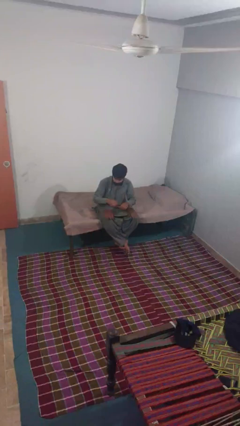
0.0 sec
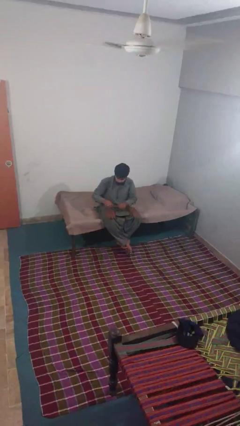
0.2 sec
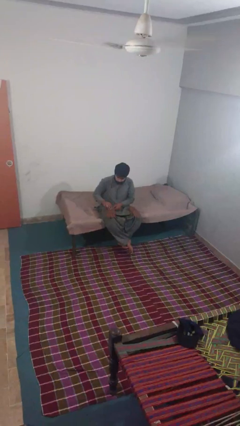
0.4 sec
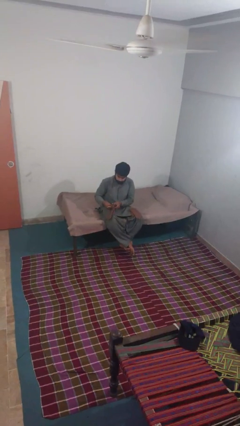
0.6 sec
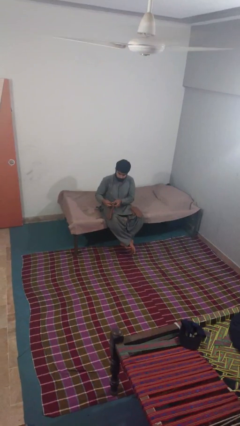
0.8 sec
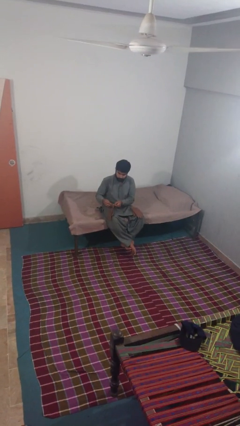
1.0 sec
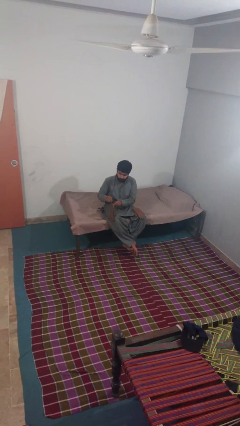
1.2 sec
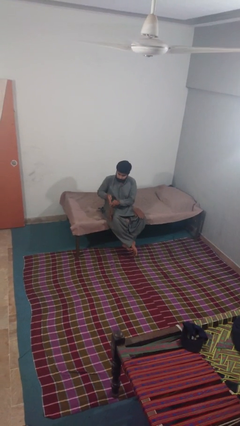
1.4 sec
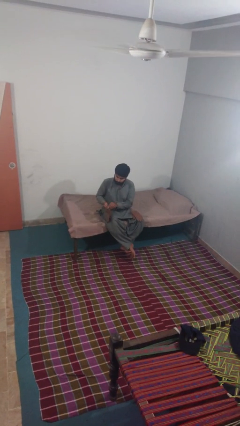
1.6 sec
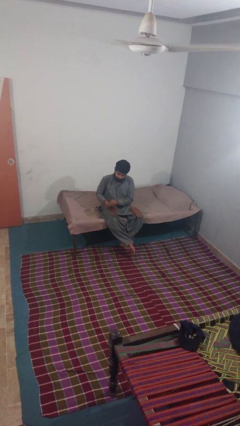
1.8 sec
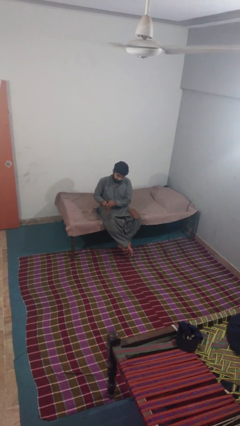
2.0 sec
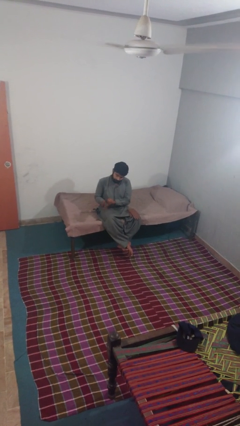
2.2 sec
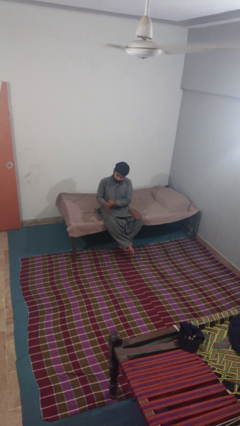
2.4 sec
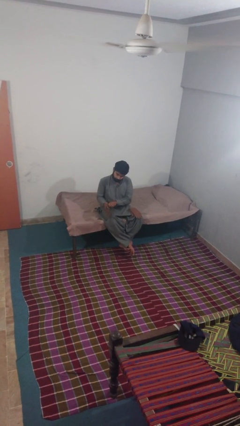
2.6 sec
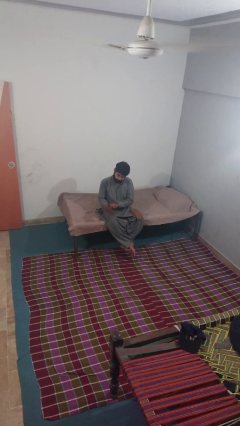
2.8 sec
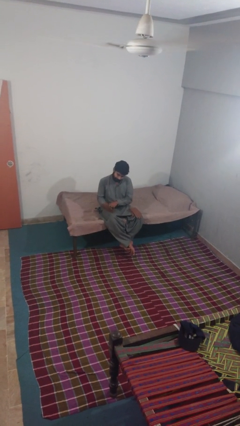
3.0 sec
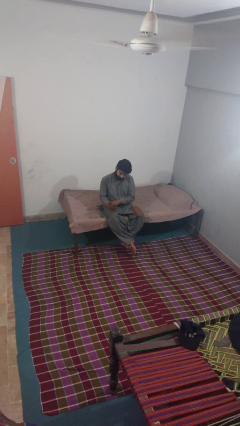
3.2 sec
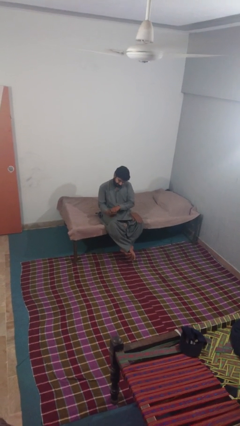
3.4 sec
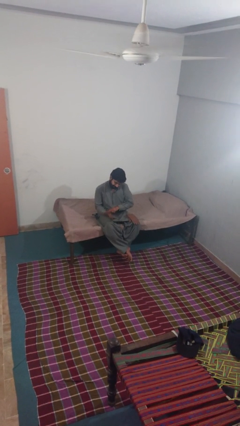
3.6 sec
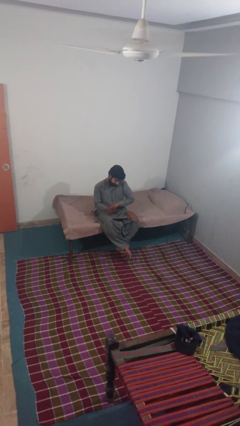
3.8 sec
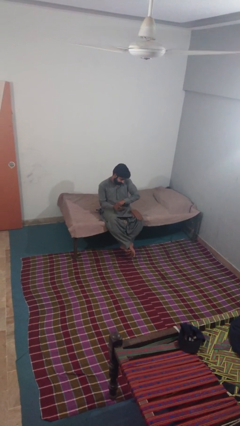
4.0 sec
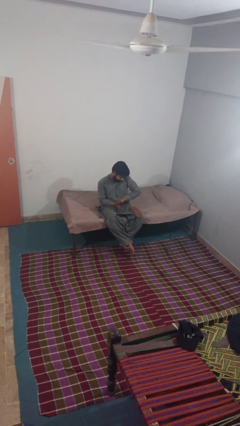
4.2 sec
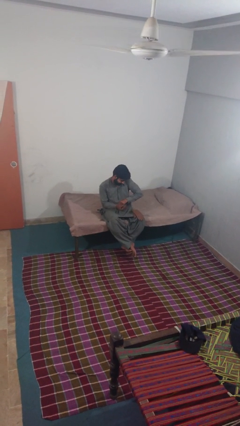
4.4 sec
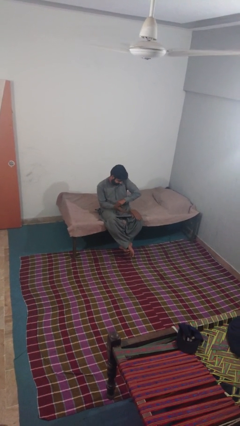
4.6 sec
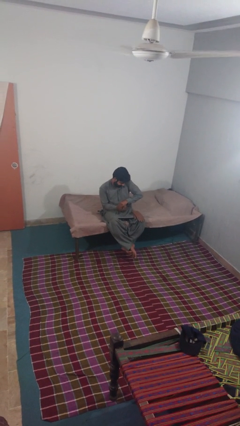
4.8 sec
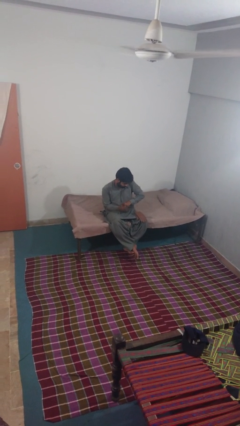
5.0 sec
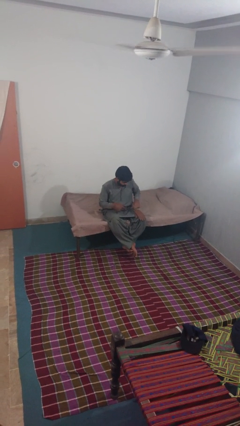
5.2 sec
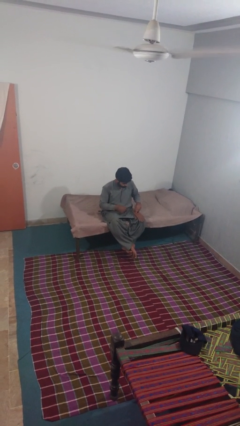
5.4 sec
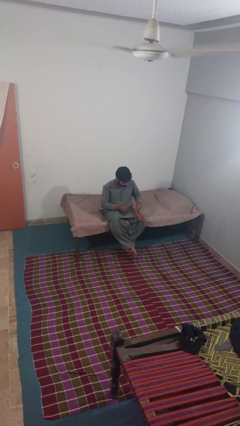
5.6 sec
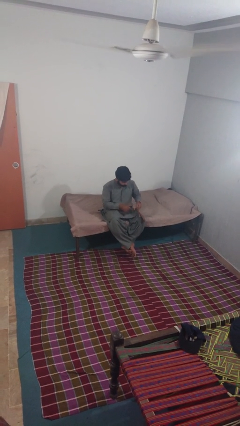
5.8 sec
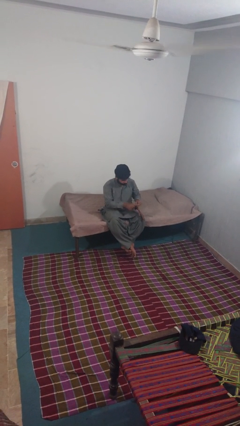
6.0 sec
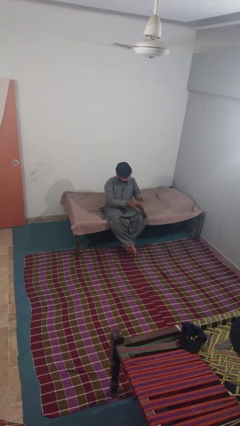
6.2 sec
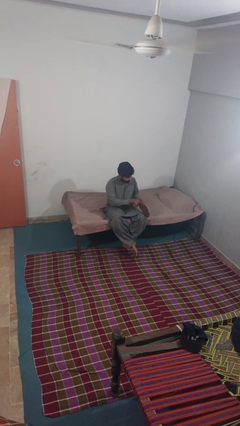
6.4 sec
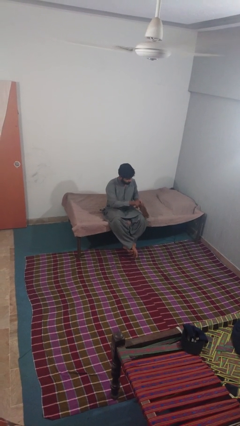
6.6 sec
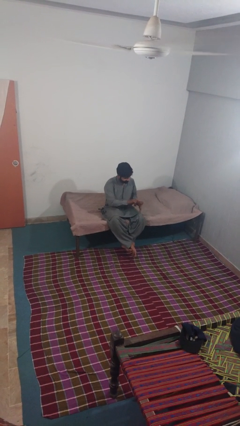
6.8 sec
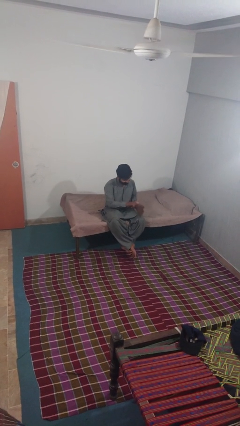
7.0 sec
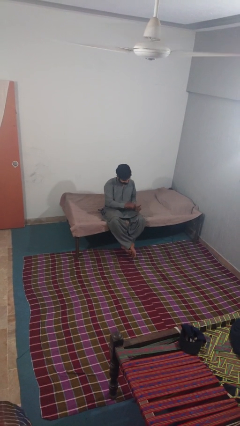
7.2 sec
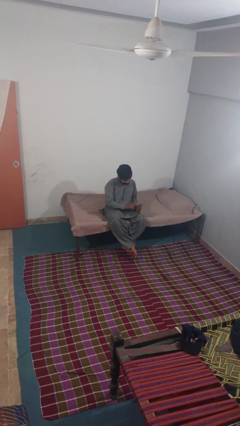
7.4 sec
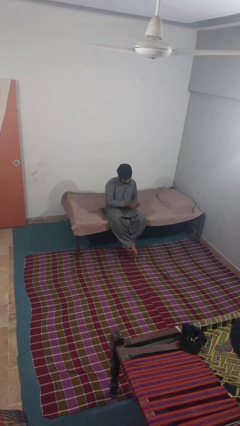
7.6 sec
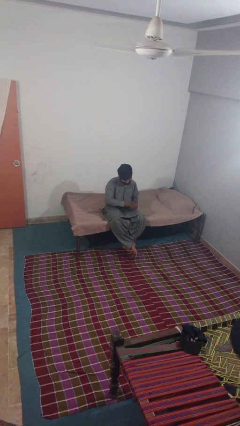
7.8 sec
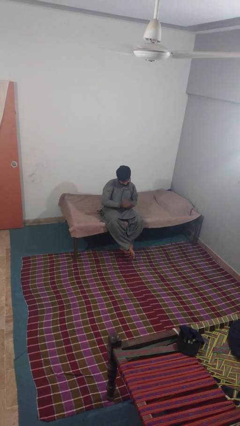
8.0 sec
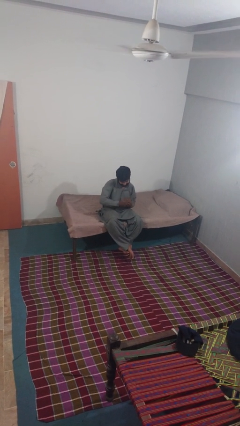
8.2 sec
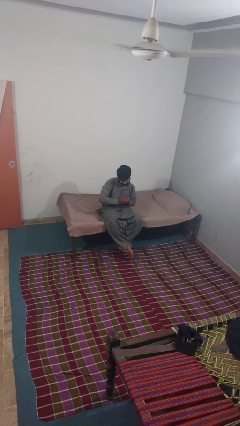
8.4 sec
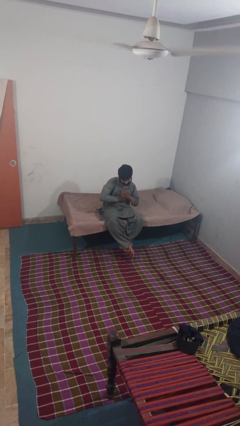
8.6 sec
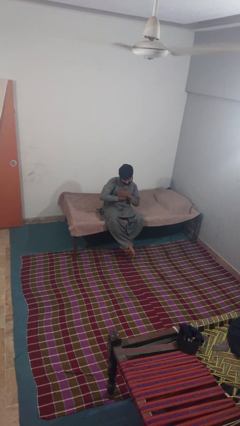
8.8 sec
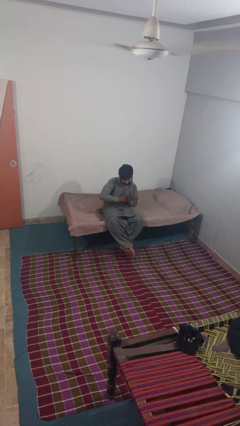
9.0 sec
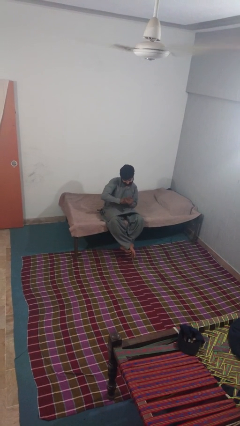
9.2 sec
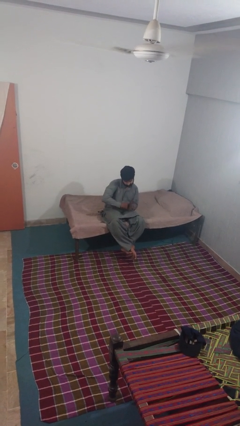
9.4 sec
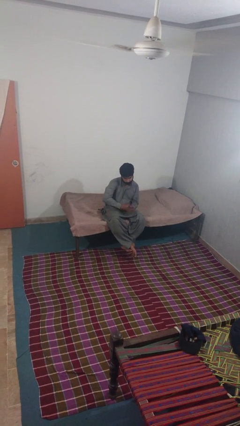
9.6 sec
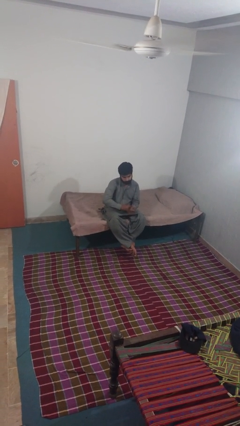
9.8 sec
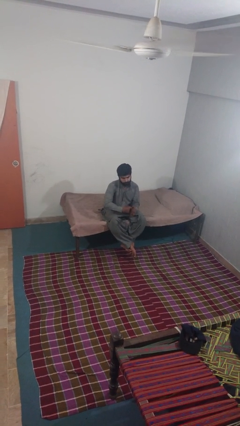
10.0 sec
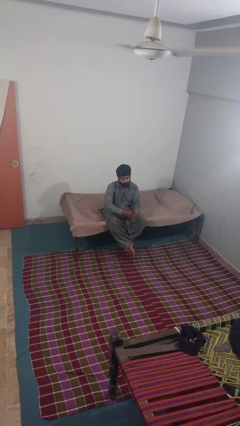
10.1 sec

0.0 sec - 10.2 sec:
person puts on gloves

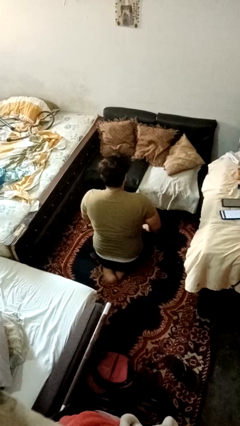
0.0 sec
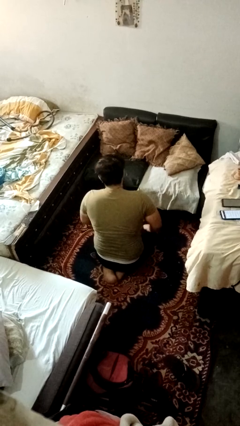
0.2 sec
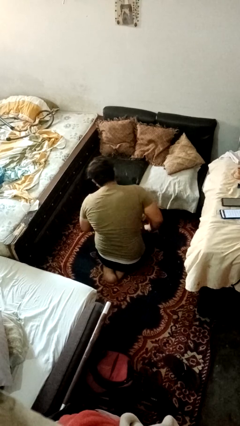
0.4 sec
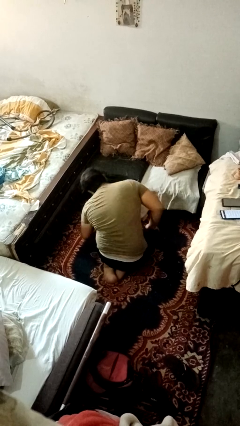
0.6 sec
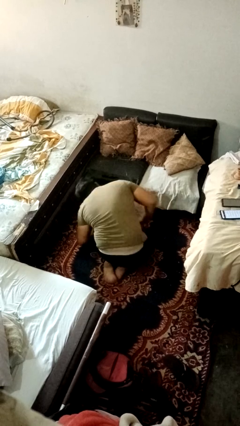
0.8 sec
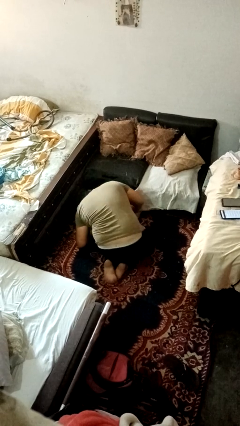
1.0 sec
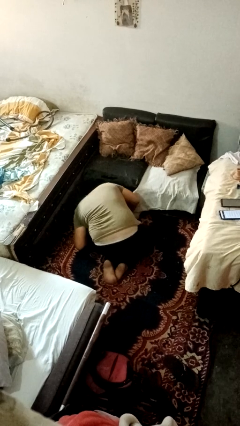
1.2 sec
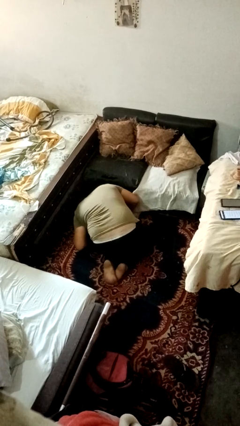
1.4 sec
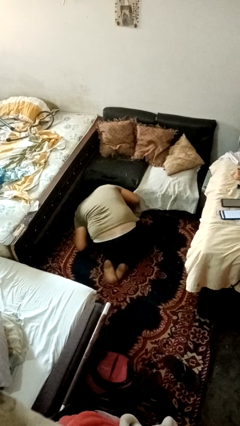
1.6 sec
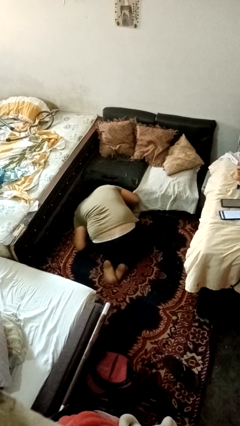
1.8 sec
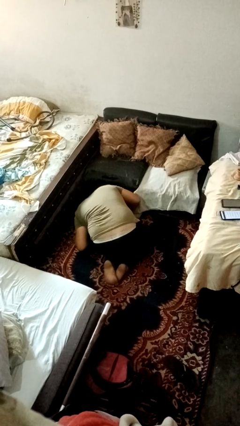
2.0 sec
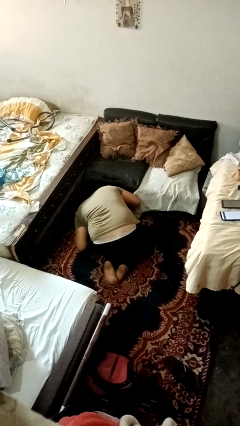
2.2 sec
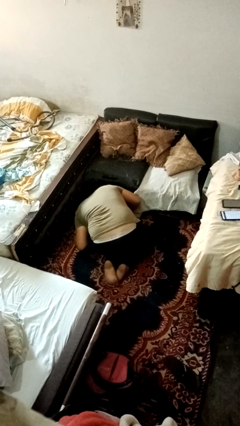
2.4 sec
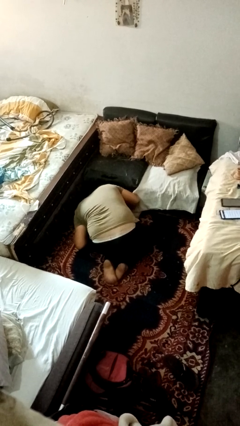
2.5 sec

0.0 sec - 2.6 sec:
person searches under couch

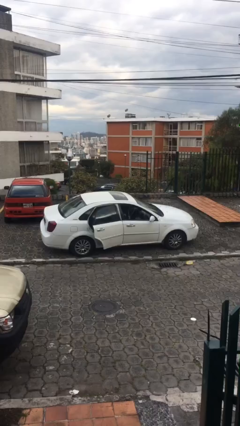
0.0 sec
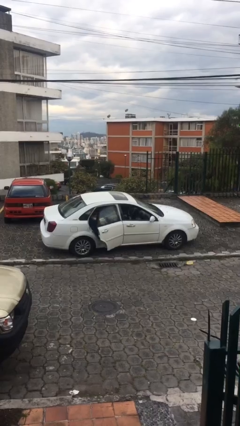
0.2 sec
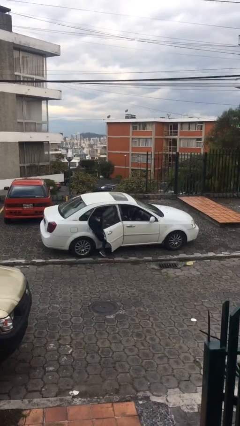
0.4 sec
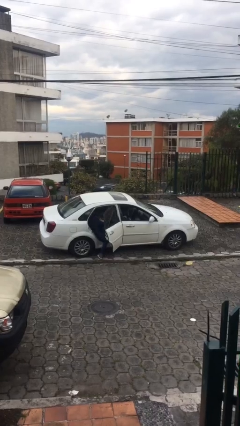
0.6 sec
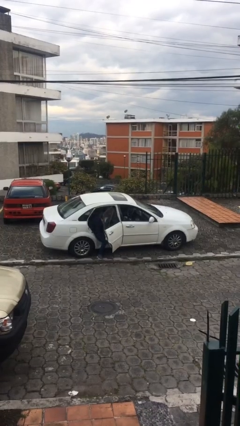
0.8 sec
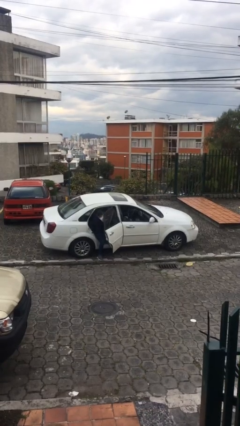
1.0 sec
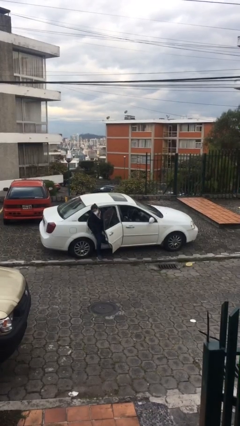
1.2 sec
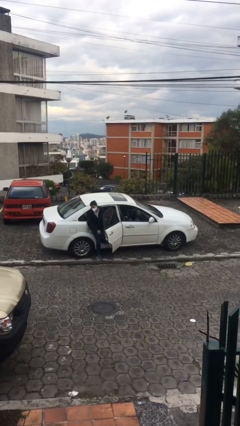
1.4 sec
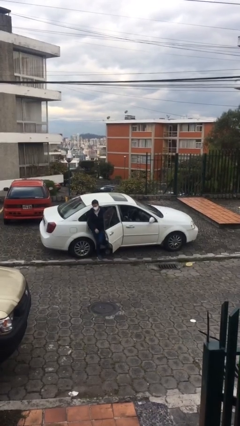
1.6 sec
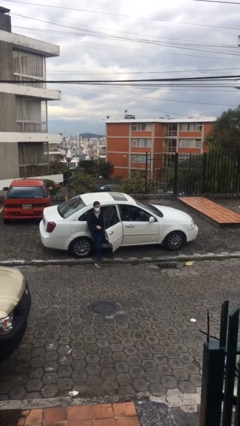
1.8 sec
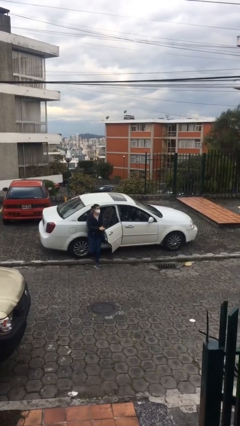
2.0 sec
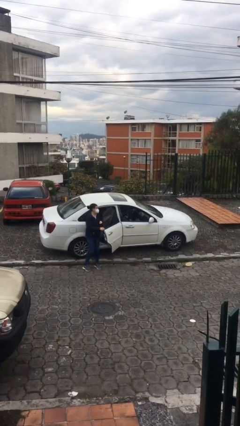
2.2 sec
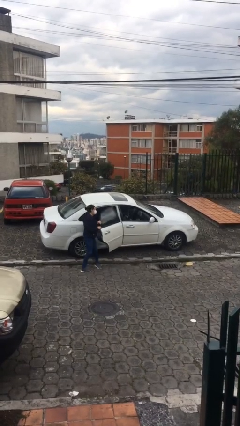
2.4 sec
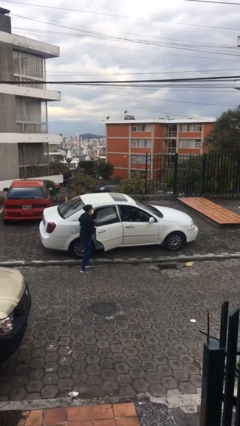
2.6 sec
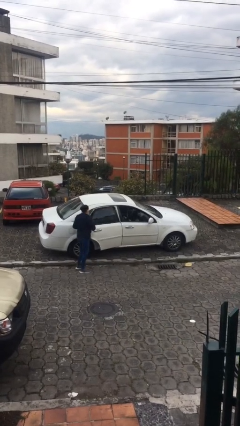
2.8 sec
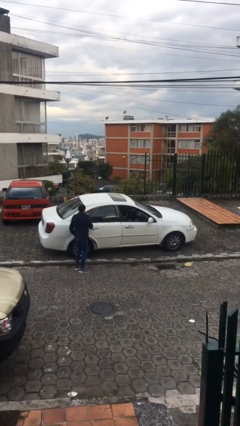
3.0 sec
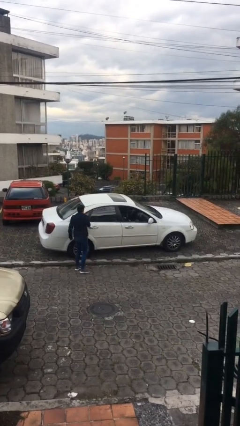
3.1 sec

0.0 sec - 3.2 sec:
car drops off person

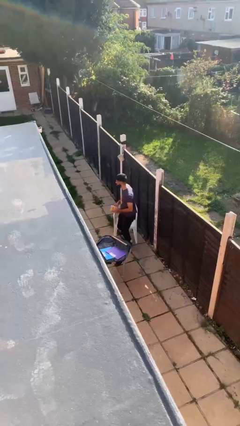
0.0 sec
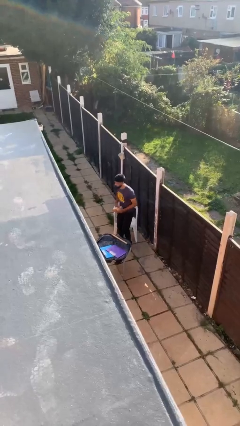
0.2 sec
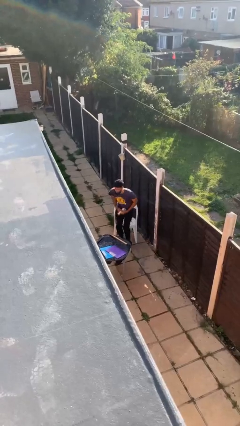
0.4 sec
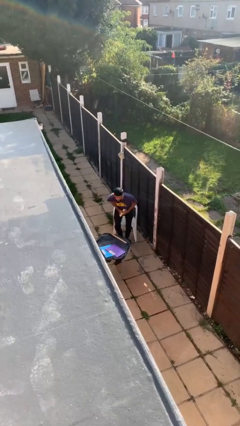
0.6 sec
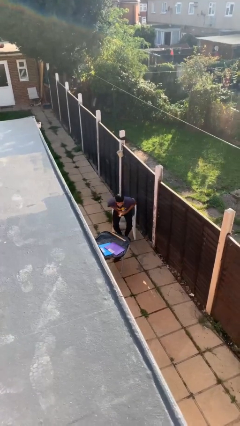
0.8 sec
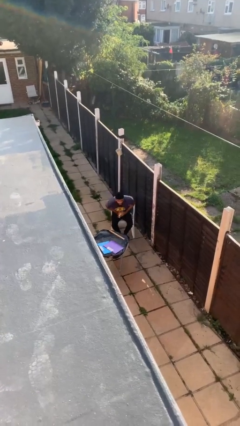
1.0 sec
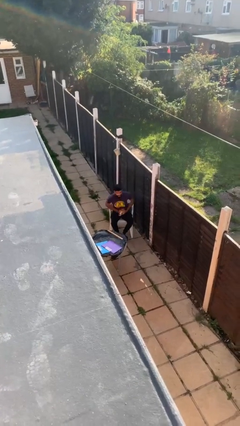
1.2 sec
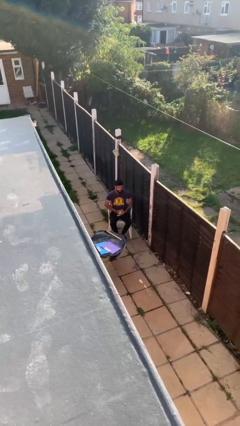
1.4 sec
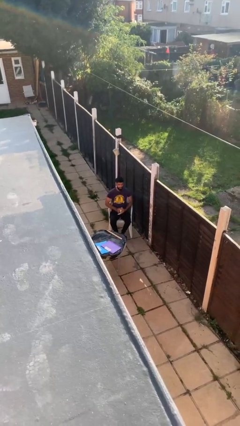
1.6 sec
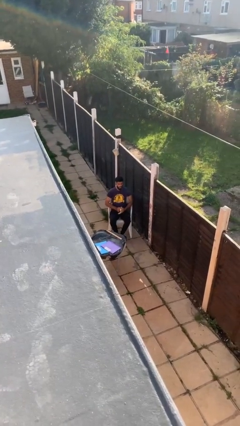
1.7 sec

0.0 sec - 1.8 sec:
person sits down
